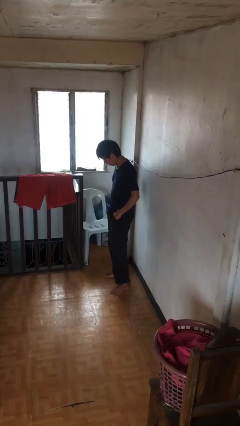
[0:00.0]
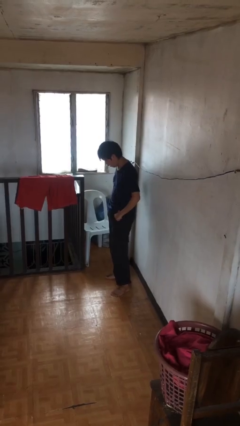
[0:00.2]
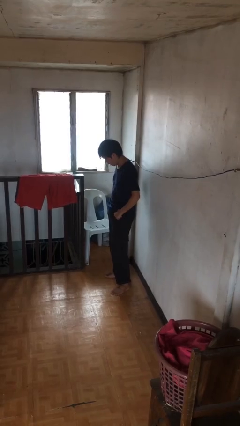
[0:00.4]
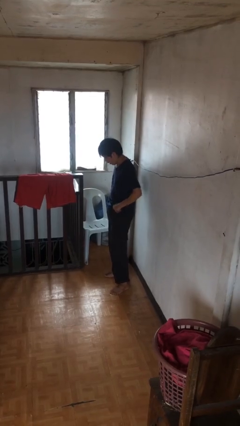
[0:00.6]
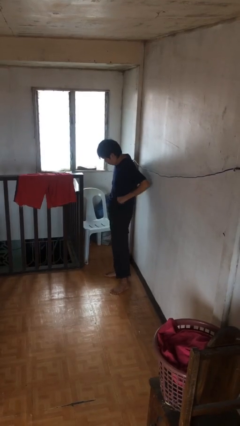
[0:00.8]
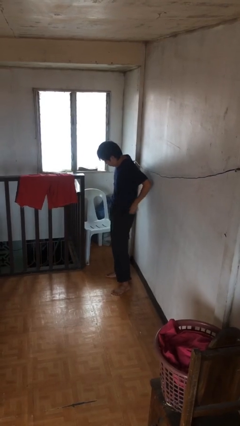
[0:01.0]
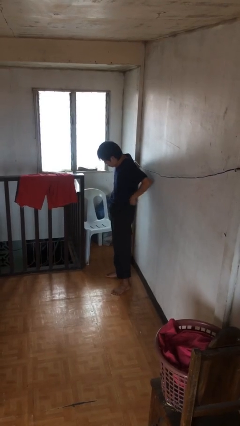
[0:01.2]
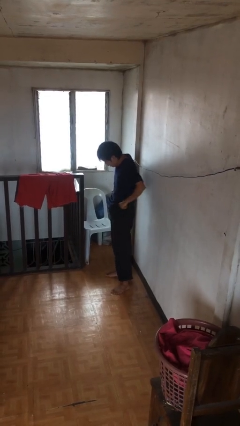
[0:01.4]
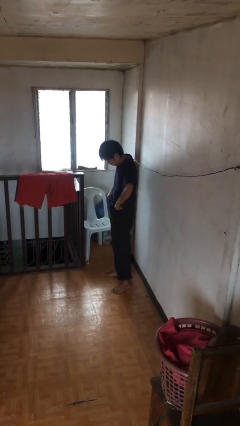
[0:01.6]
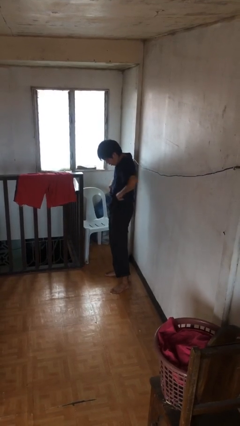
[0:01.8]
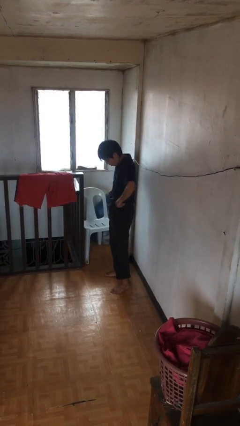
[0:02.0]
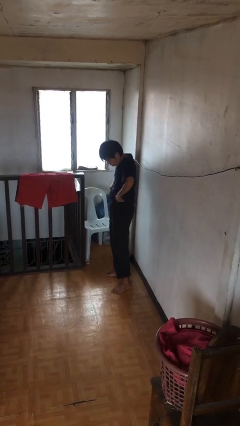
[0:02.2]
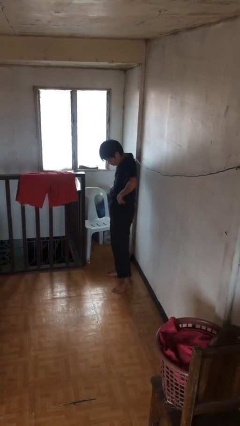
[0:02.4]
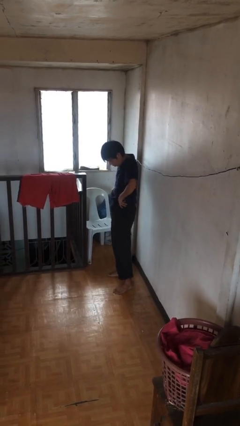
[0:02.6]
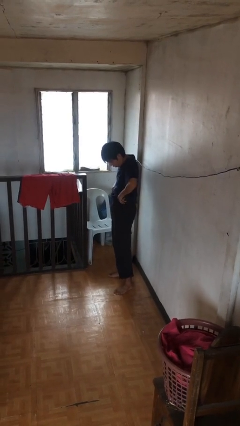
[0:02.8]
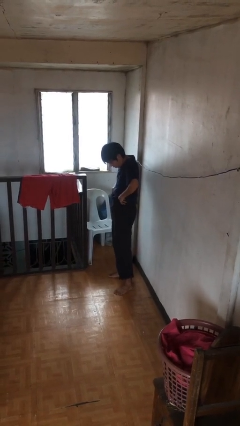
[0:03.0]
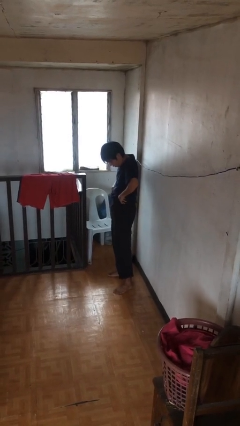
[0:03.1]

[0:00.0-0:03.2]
person hikes up pants

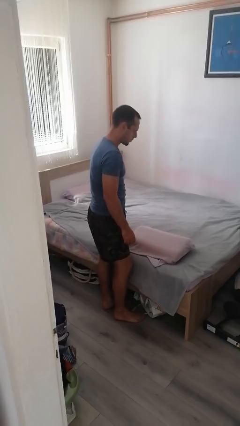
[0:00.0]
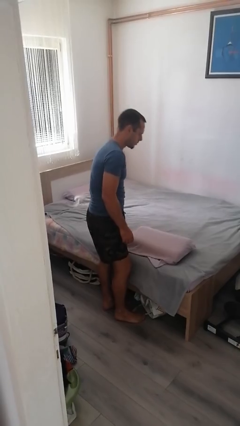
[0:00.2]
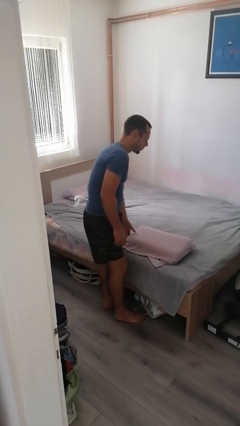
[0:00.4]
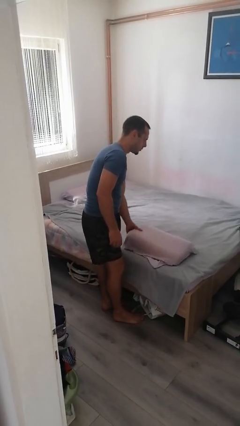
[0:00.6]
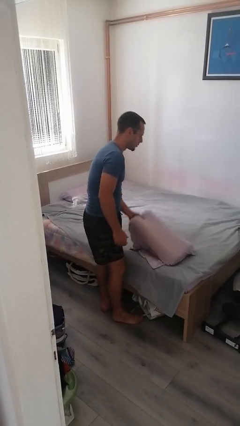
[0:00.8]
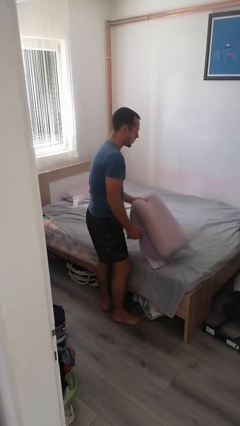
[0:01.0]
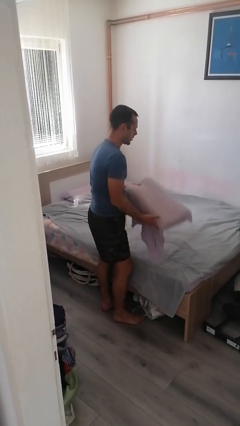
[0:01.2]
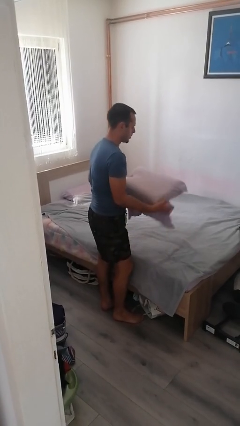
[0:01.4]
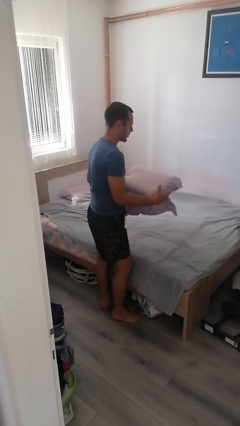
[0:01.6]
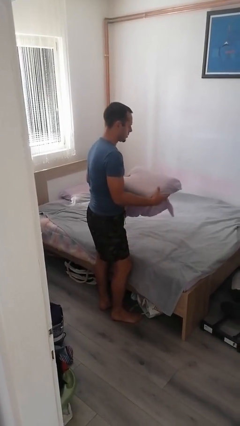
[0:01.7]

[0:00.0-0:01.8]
person picks up object from bed

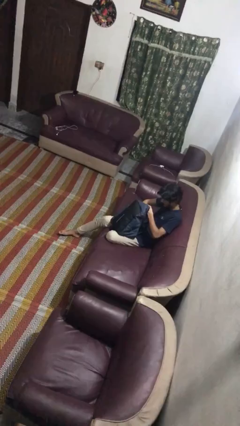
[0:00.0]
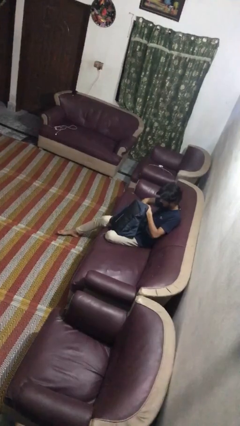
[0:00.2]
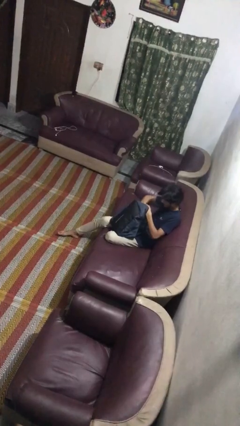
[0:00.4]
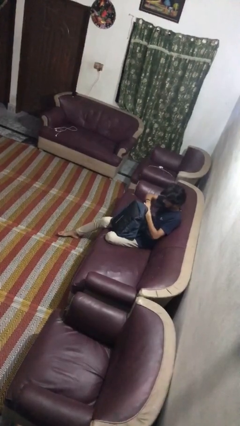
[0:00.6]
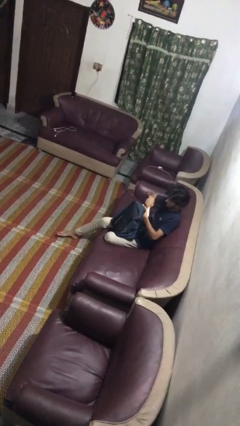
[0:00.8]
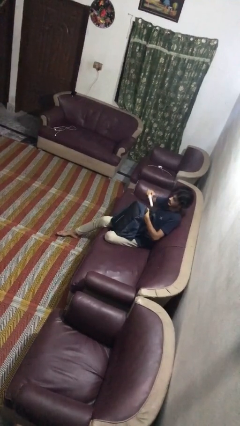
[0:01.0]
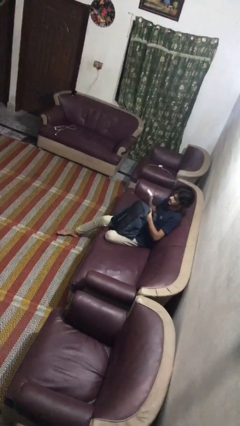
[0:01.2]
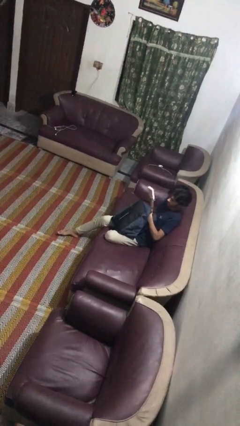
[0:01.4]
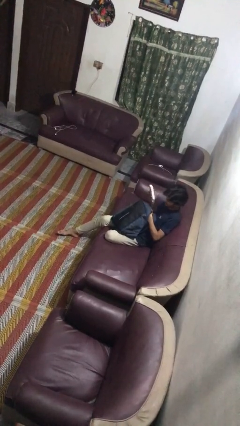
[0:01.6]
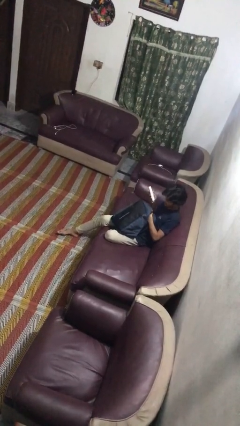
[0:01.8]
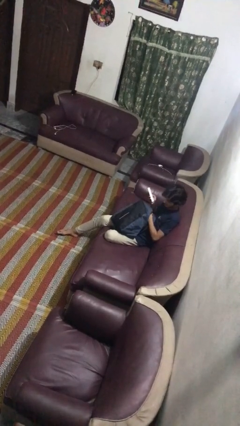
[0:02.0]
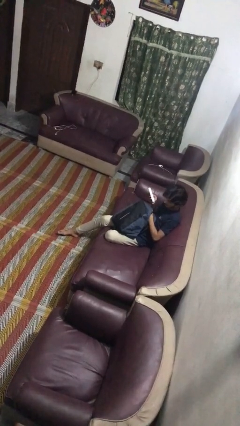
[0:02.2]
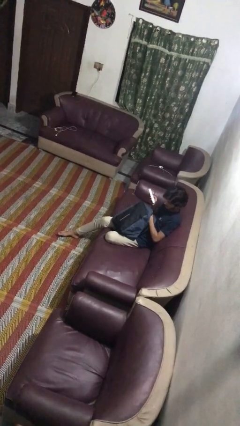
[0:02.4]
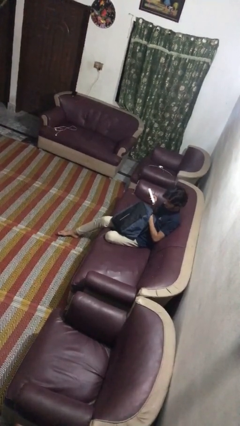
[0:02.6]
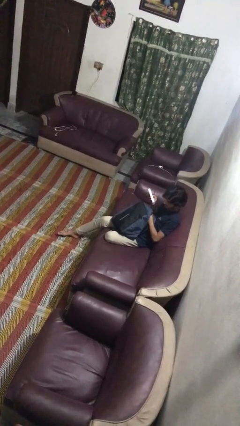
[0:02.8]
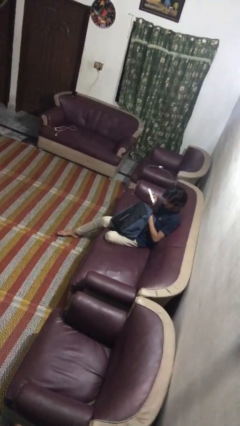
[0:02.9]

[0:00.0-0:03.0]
person takes object from backpack

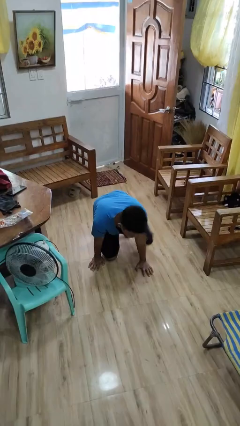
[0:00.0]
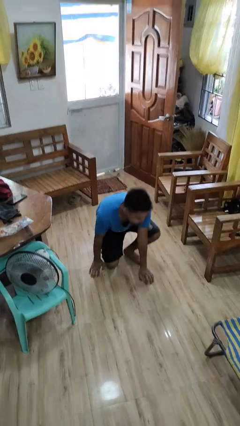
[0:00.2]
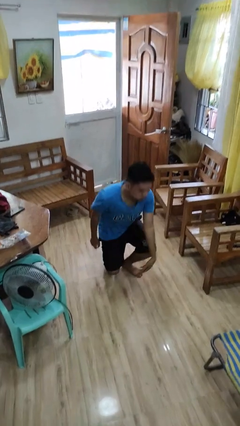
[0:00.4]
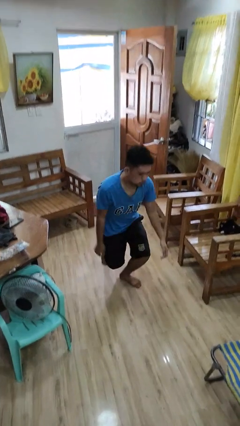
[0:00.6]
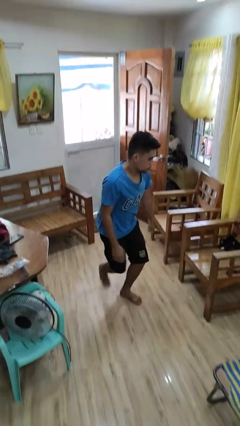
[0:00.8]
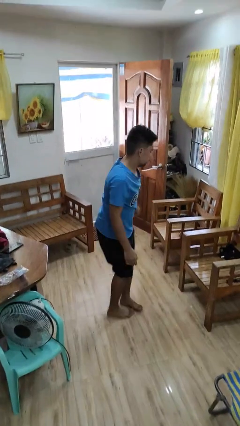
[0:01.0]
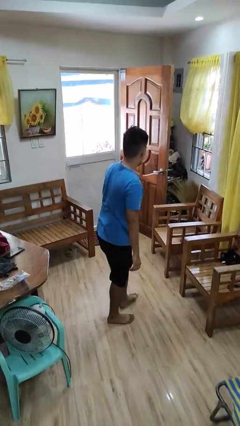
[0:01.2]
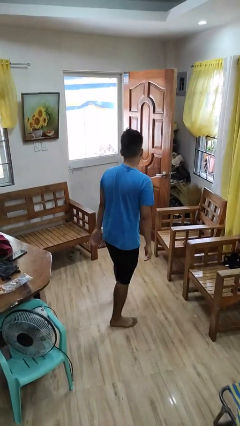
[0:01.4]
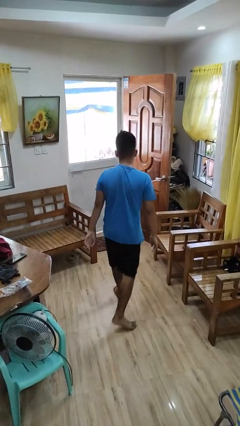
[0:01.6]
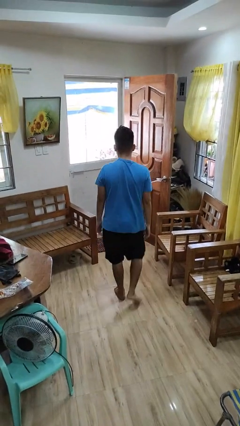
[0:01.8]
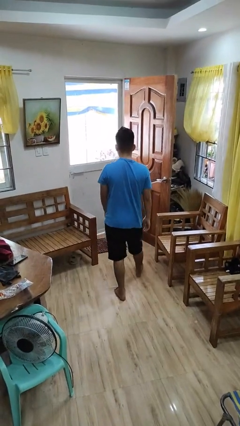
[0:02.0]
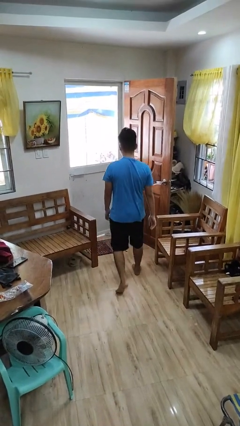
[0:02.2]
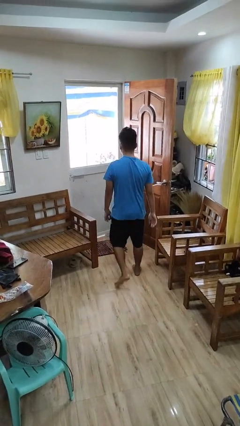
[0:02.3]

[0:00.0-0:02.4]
person stands up from floor

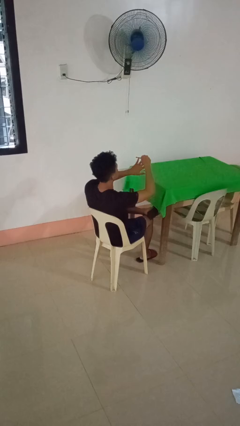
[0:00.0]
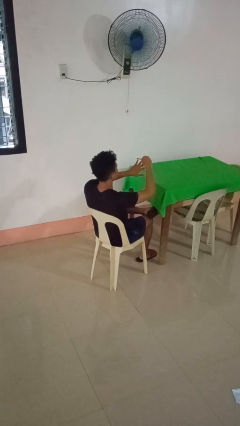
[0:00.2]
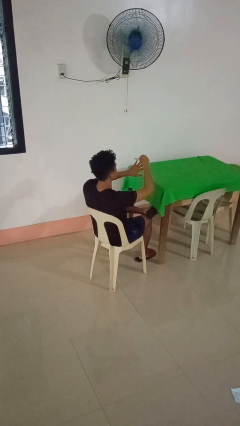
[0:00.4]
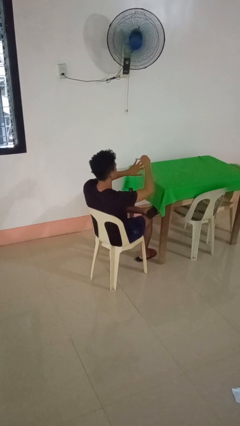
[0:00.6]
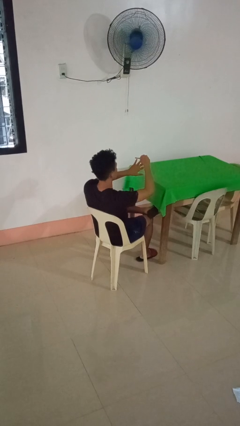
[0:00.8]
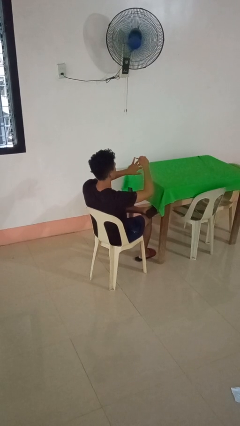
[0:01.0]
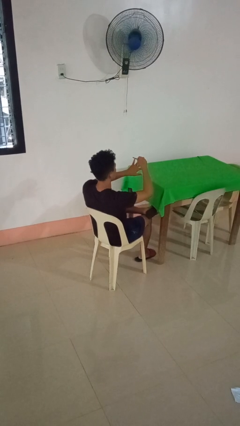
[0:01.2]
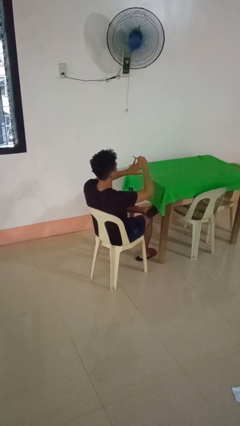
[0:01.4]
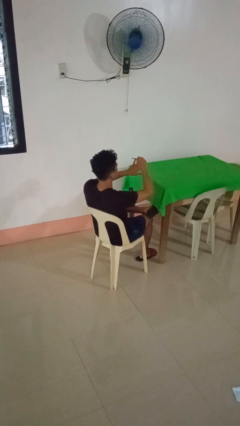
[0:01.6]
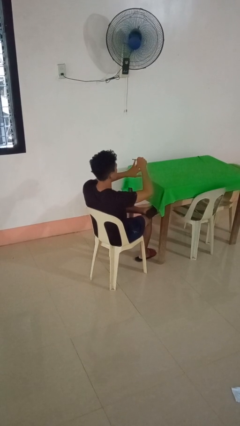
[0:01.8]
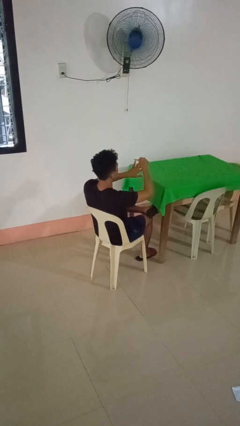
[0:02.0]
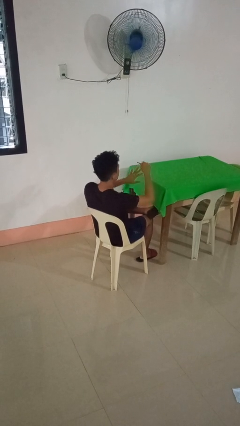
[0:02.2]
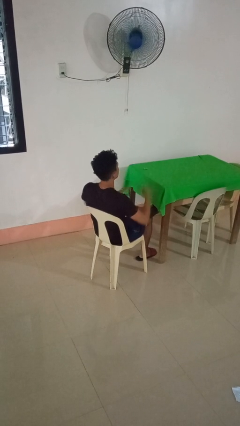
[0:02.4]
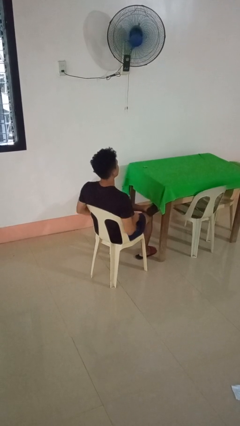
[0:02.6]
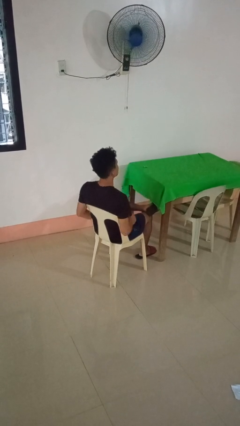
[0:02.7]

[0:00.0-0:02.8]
person files fingernails

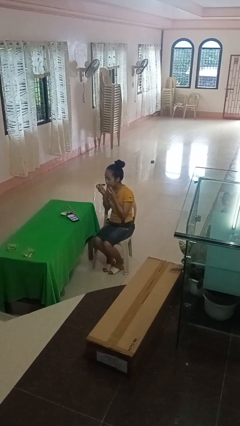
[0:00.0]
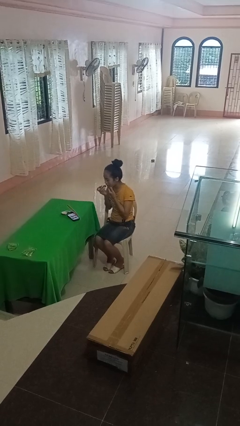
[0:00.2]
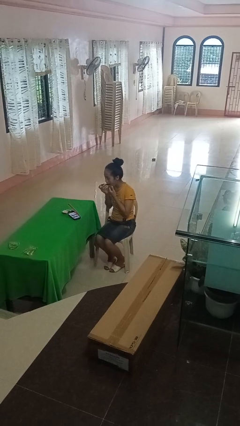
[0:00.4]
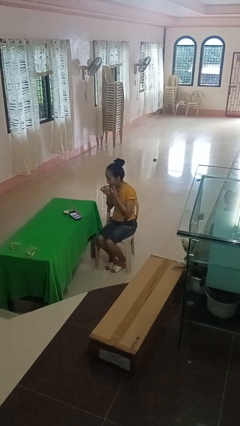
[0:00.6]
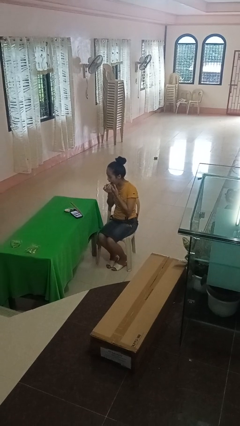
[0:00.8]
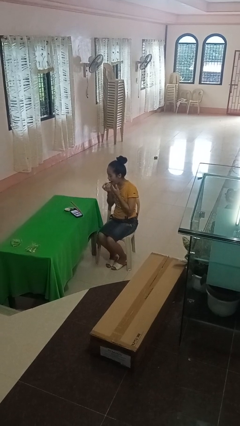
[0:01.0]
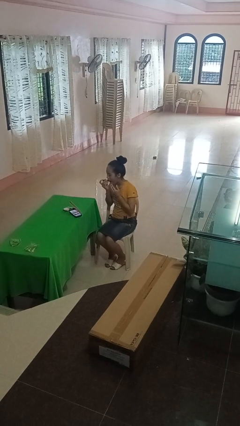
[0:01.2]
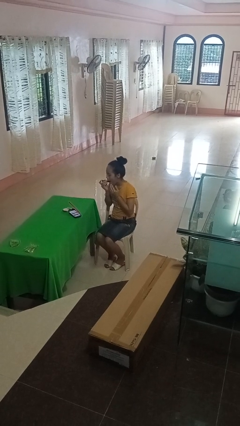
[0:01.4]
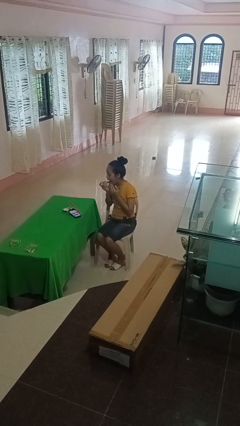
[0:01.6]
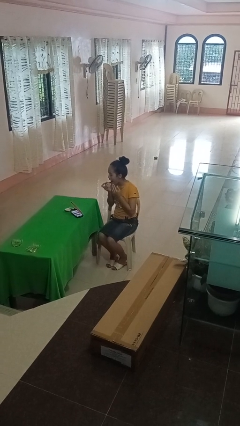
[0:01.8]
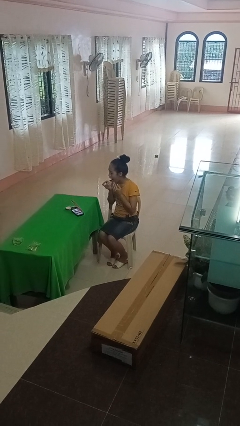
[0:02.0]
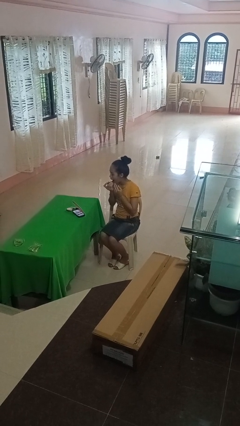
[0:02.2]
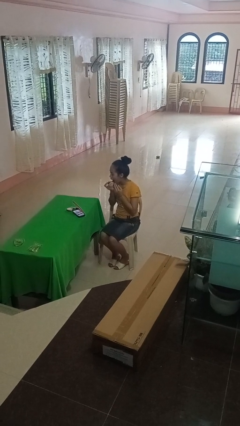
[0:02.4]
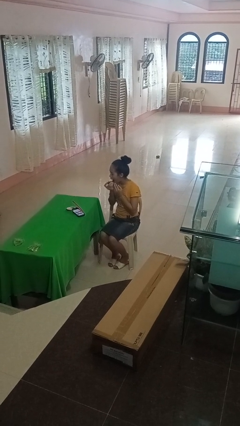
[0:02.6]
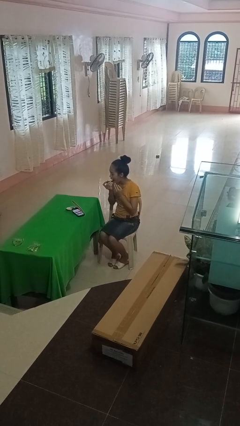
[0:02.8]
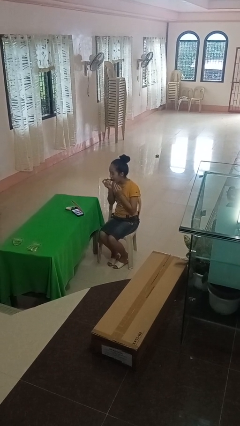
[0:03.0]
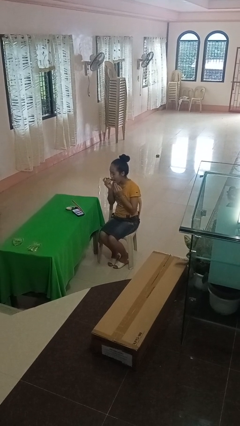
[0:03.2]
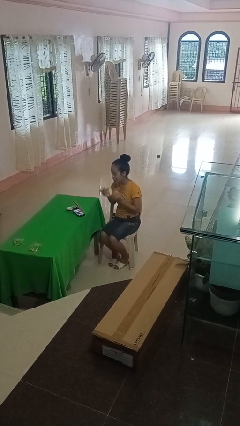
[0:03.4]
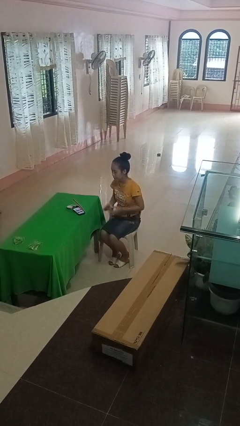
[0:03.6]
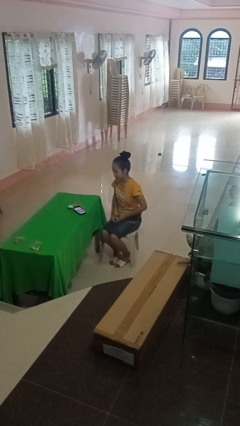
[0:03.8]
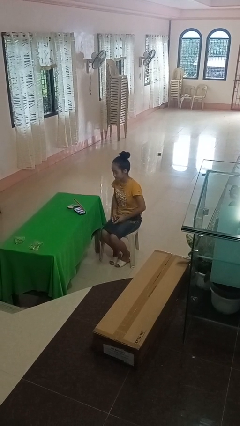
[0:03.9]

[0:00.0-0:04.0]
person applies lip makeup

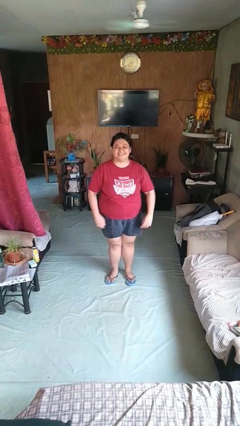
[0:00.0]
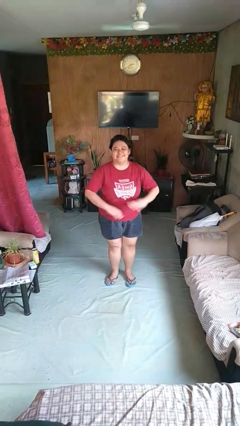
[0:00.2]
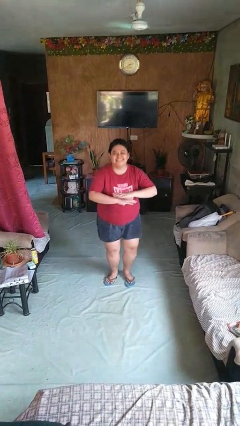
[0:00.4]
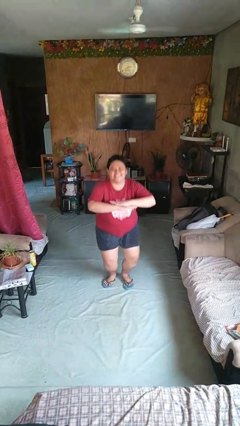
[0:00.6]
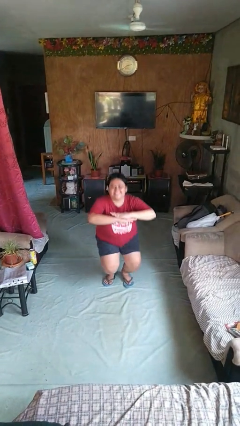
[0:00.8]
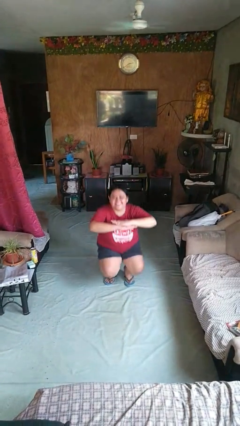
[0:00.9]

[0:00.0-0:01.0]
person squats
